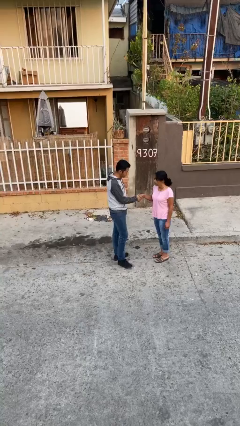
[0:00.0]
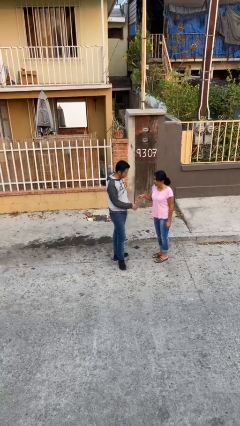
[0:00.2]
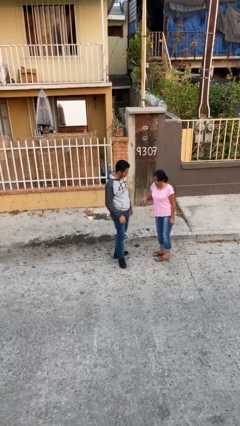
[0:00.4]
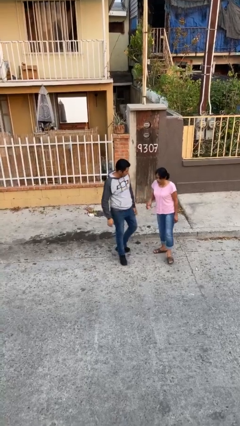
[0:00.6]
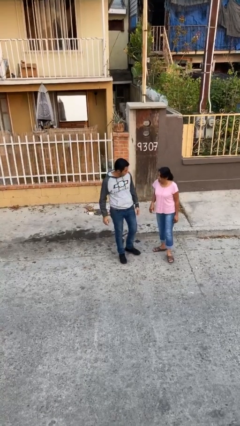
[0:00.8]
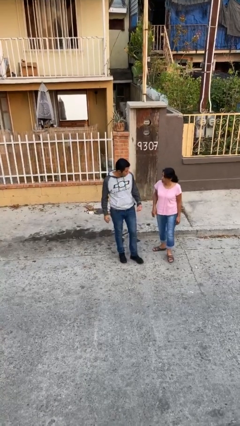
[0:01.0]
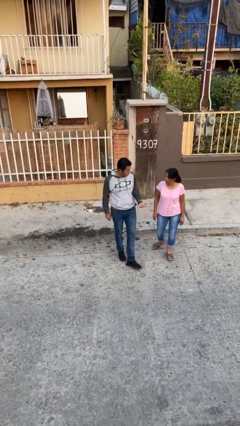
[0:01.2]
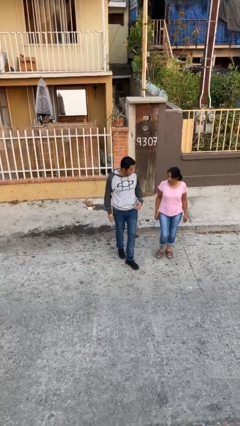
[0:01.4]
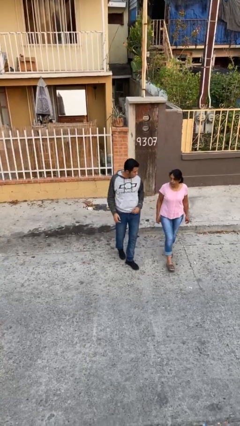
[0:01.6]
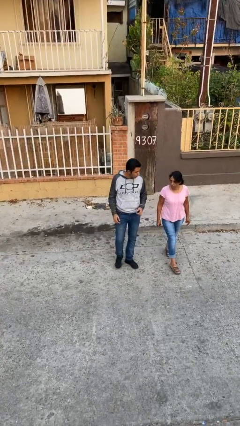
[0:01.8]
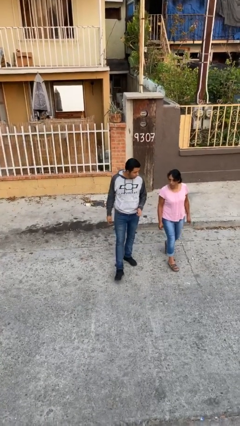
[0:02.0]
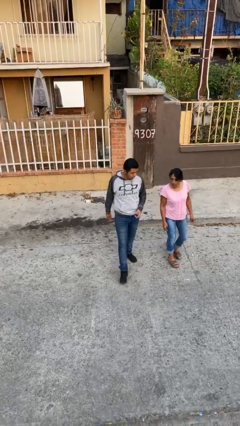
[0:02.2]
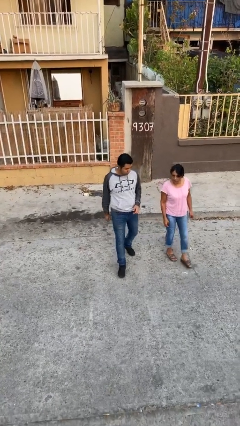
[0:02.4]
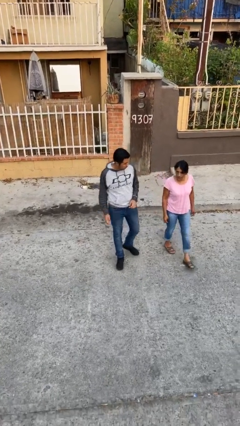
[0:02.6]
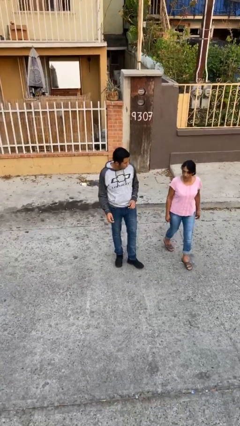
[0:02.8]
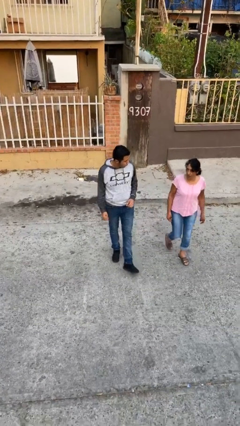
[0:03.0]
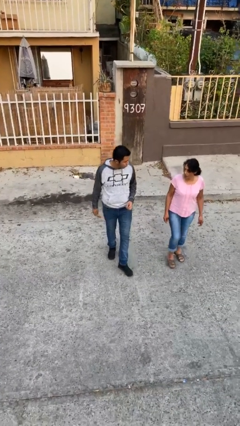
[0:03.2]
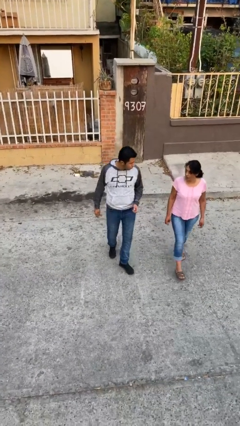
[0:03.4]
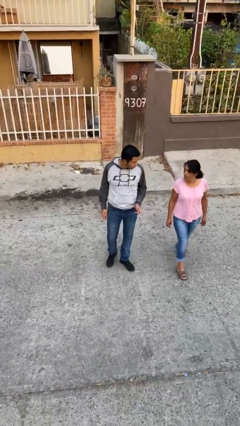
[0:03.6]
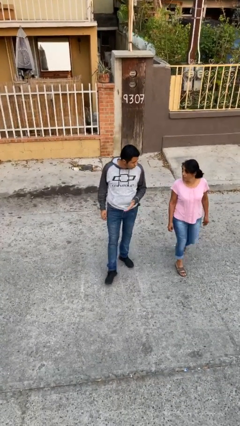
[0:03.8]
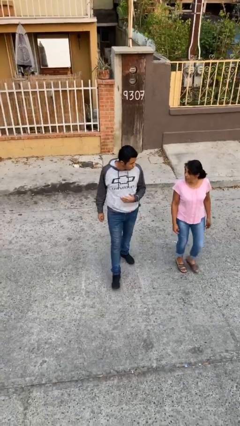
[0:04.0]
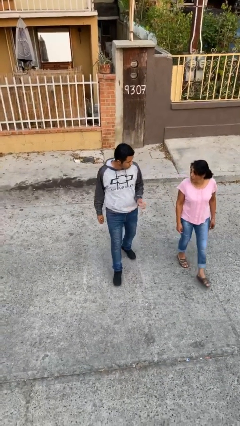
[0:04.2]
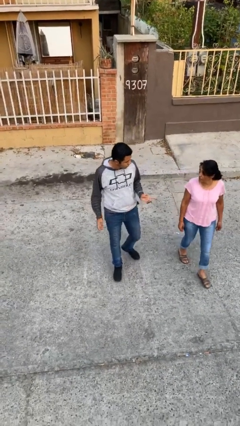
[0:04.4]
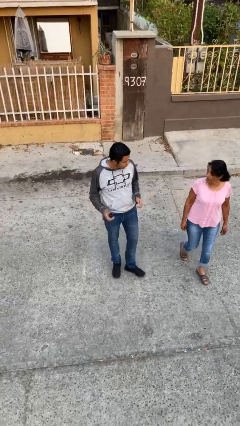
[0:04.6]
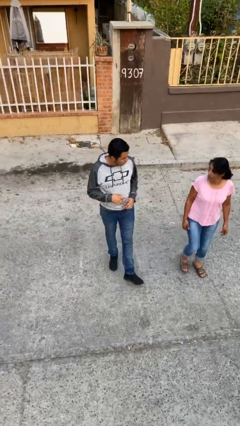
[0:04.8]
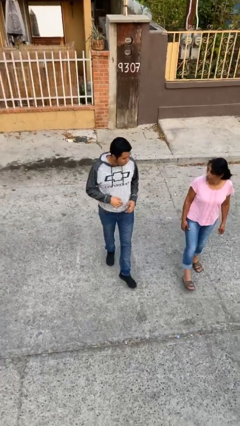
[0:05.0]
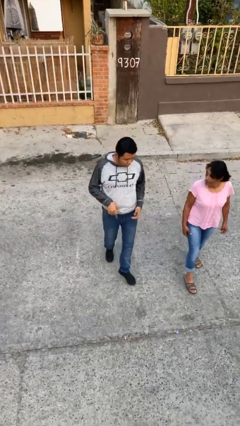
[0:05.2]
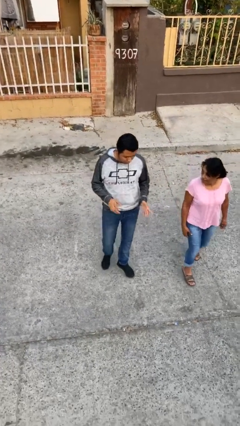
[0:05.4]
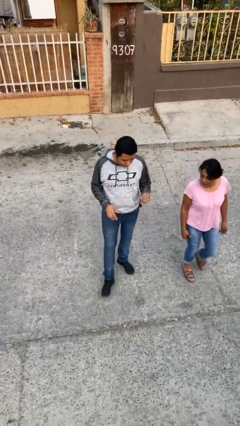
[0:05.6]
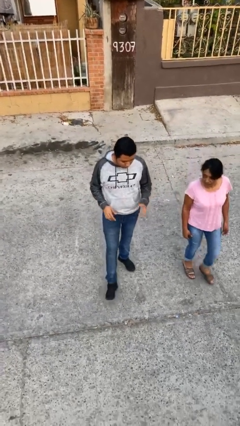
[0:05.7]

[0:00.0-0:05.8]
person talks to person

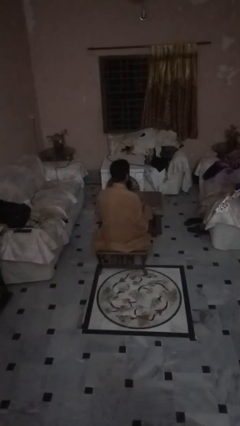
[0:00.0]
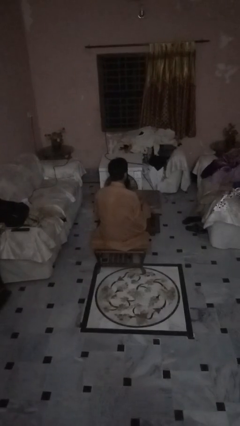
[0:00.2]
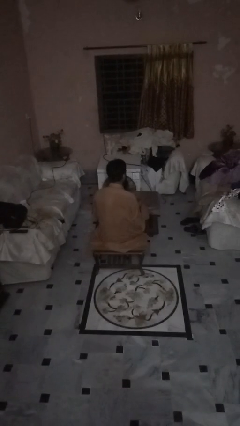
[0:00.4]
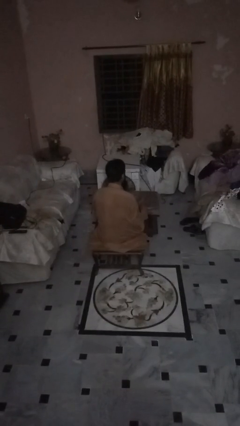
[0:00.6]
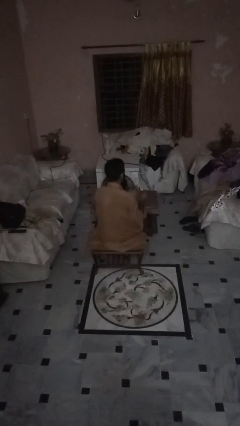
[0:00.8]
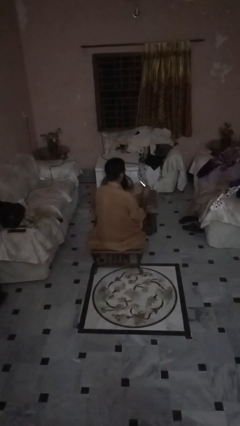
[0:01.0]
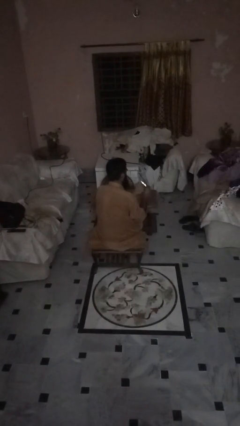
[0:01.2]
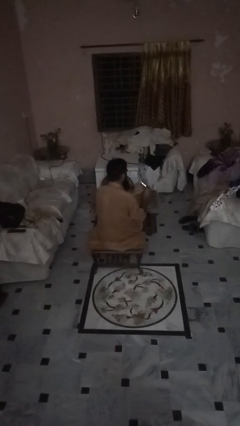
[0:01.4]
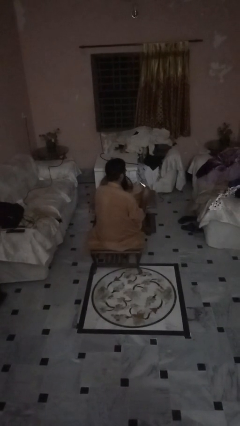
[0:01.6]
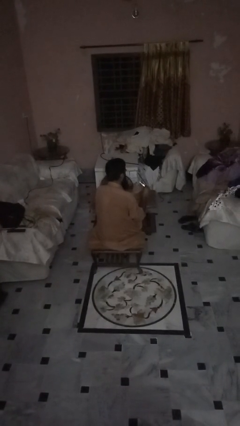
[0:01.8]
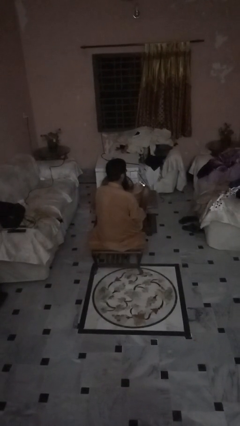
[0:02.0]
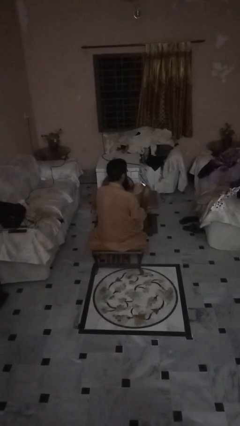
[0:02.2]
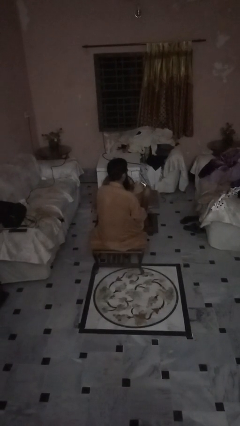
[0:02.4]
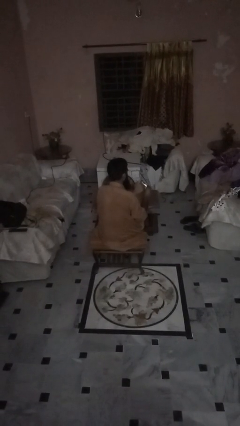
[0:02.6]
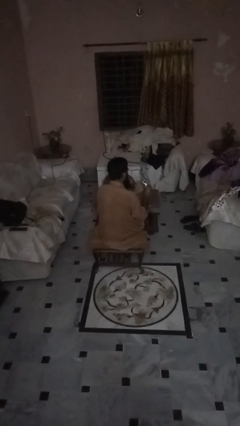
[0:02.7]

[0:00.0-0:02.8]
person files fingernails

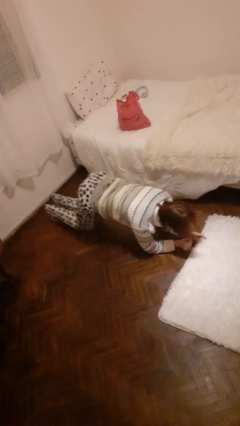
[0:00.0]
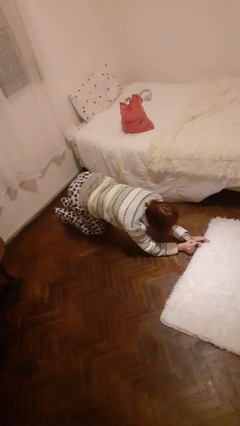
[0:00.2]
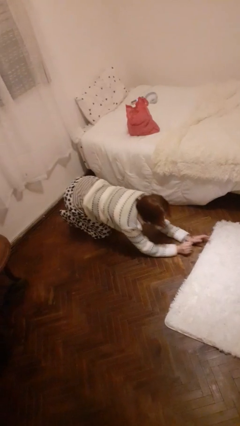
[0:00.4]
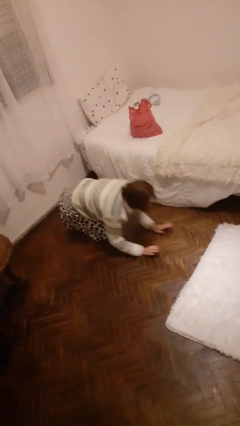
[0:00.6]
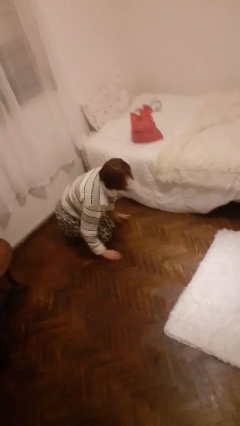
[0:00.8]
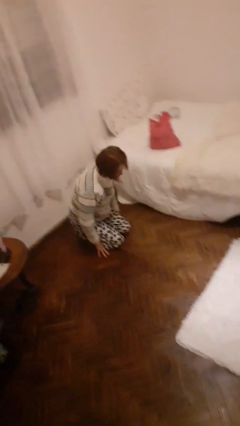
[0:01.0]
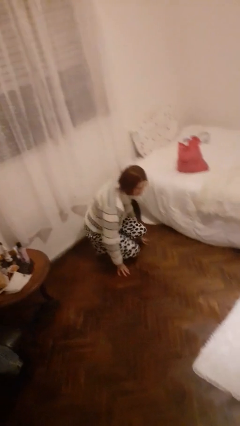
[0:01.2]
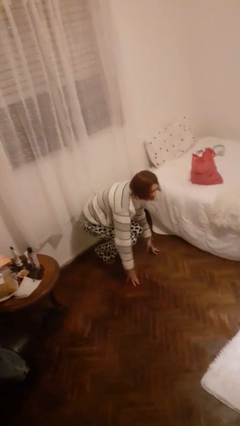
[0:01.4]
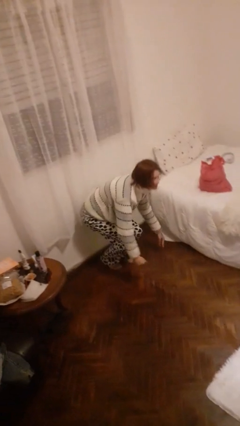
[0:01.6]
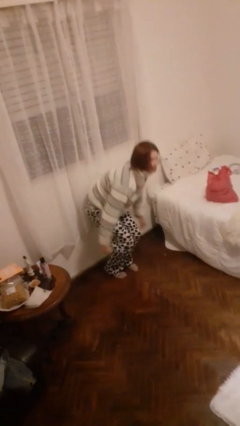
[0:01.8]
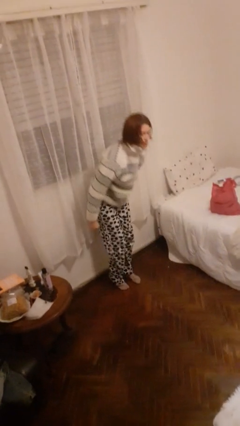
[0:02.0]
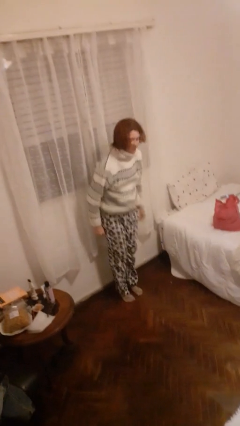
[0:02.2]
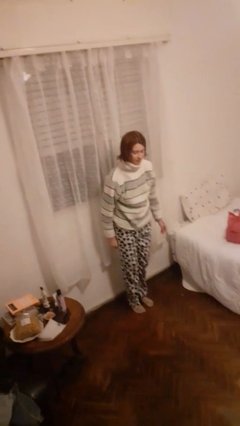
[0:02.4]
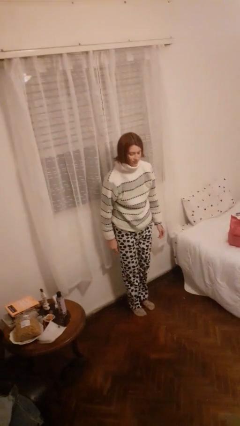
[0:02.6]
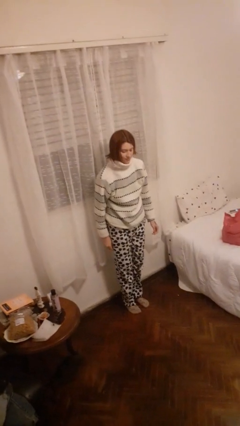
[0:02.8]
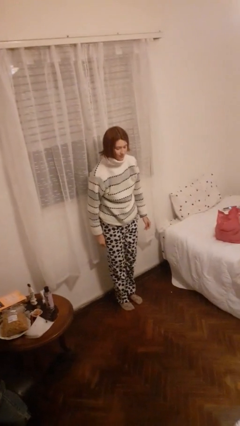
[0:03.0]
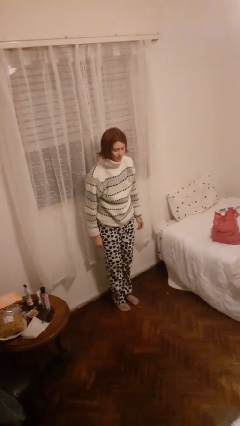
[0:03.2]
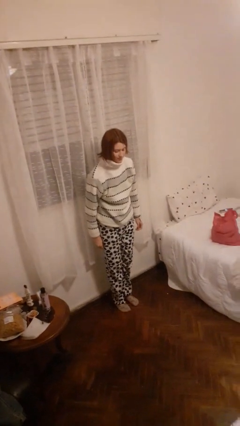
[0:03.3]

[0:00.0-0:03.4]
person stands up from floor

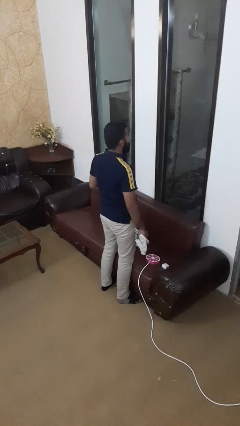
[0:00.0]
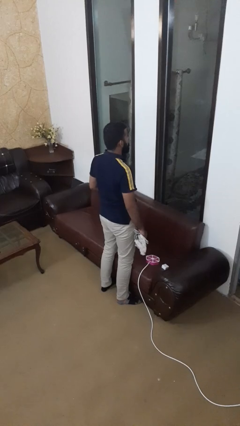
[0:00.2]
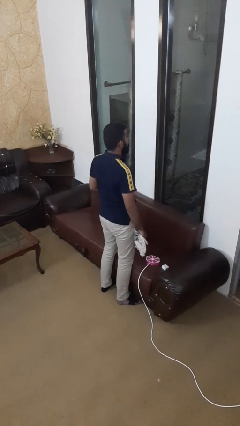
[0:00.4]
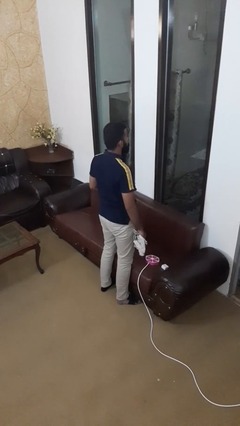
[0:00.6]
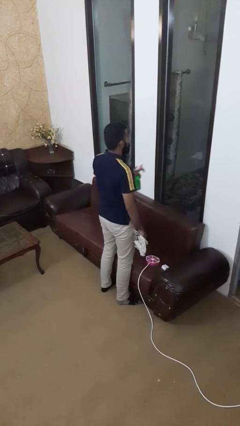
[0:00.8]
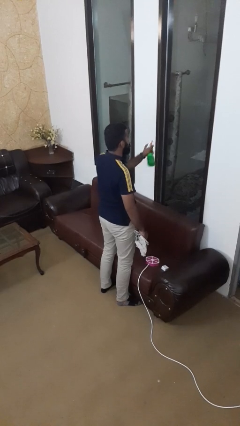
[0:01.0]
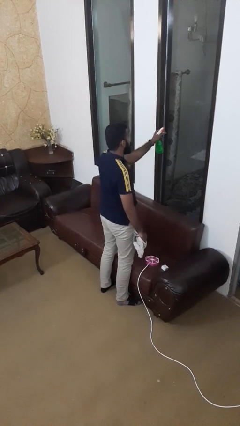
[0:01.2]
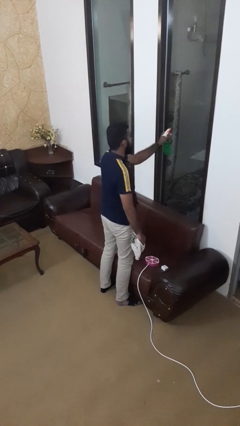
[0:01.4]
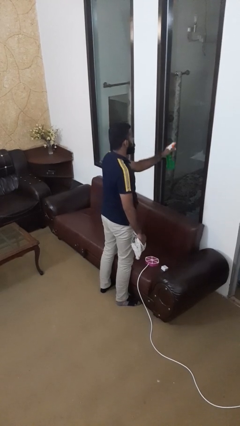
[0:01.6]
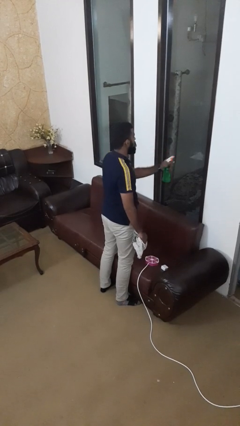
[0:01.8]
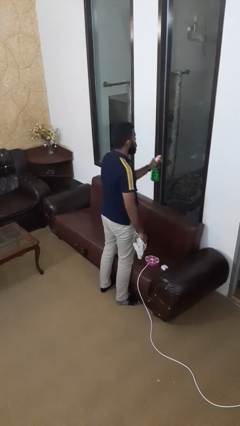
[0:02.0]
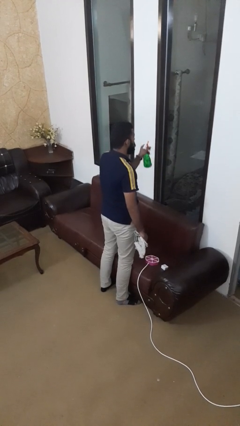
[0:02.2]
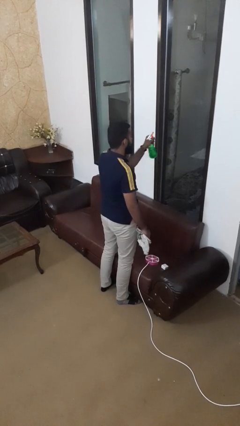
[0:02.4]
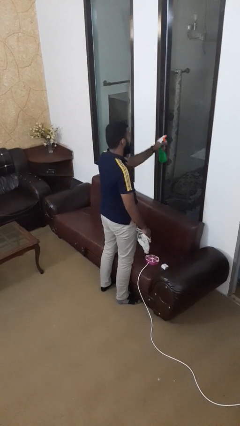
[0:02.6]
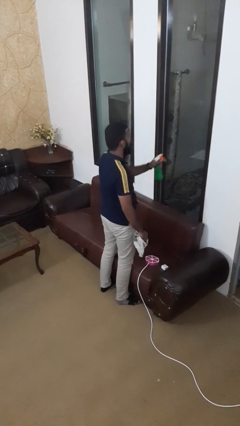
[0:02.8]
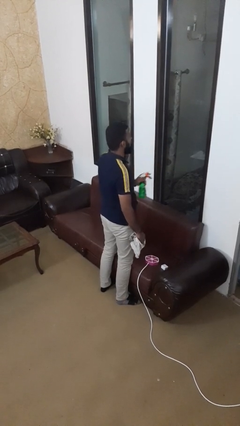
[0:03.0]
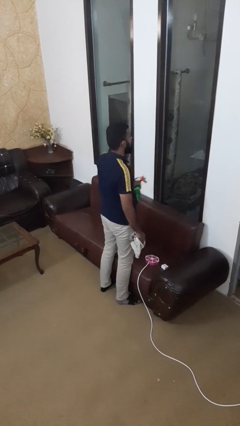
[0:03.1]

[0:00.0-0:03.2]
person sprays from bottle

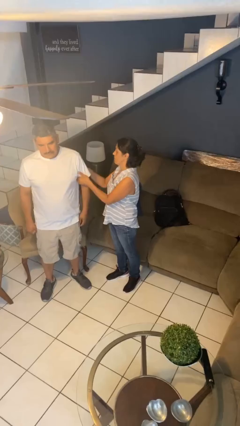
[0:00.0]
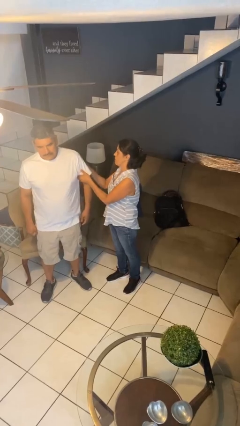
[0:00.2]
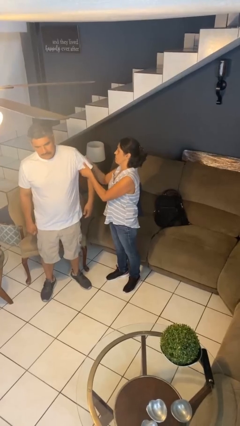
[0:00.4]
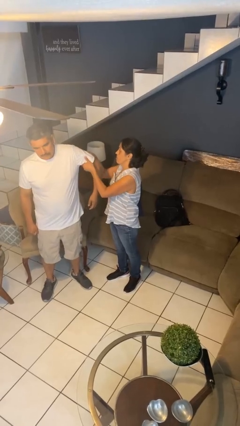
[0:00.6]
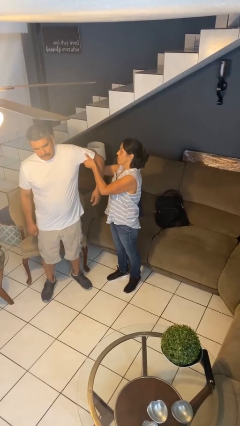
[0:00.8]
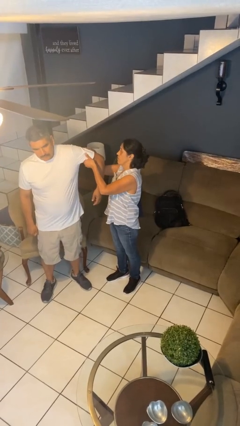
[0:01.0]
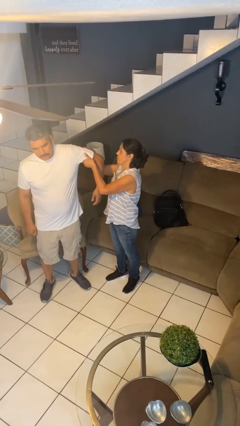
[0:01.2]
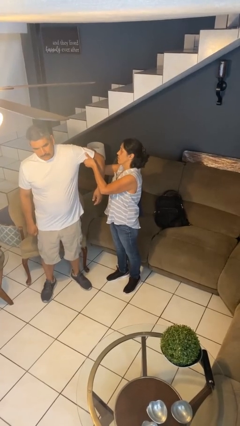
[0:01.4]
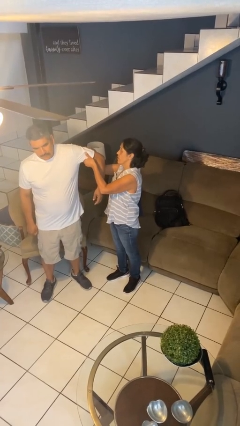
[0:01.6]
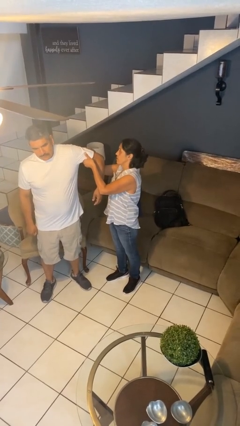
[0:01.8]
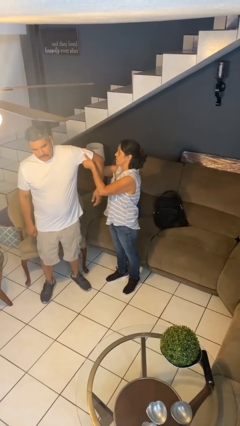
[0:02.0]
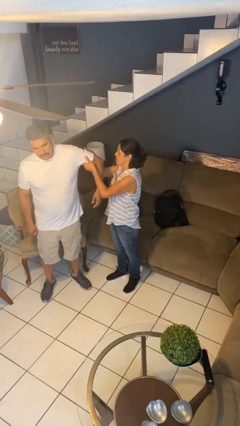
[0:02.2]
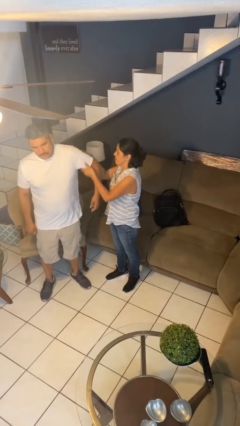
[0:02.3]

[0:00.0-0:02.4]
person grabs person by bicep
